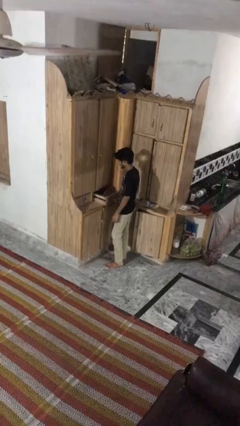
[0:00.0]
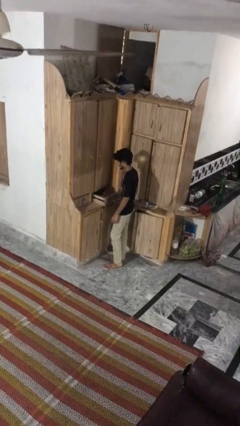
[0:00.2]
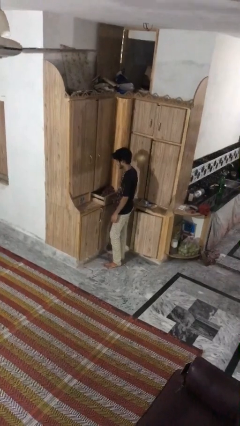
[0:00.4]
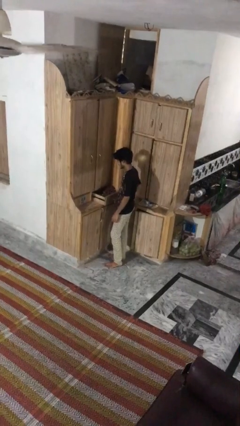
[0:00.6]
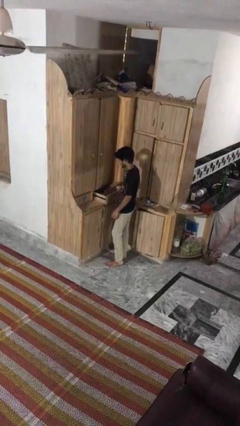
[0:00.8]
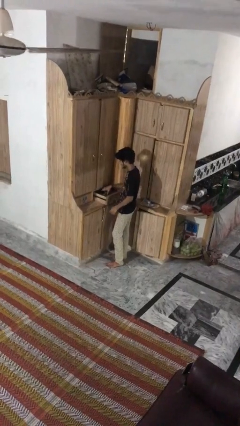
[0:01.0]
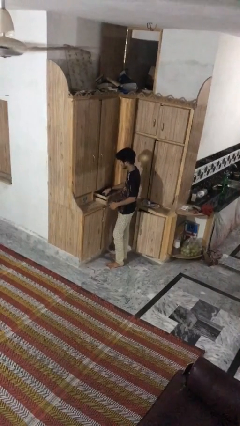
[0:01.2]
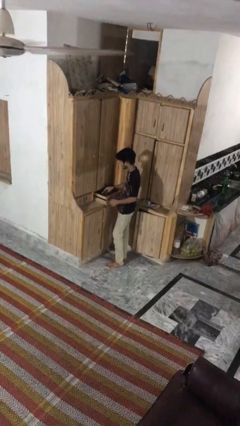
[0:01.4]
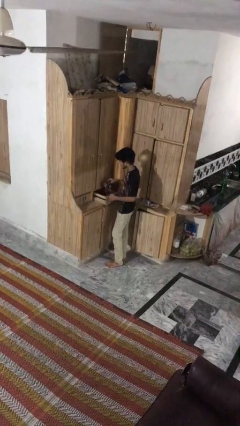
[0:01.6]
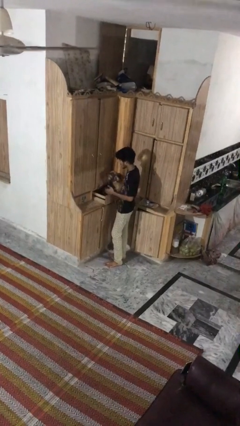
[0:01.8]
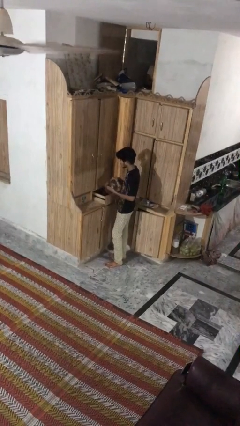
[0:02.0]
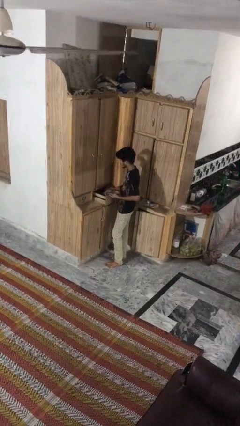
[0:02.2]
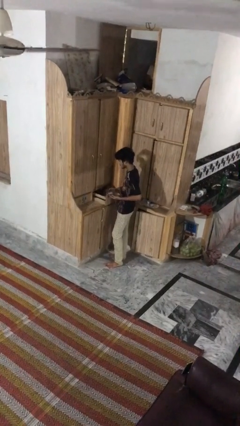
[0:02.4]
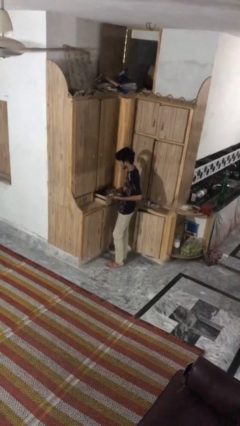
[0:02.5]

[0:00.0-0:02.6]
person takes clothes from dresser

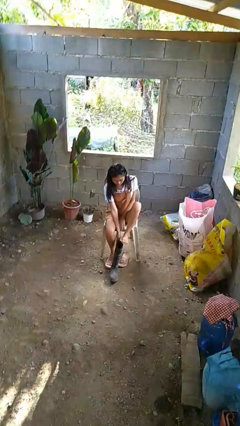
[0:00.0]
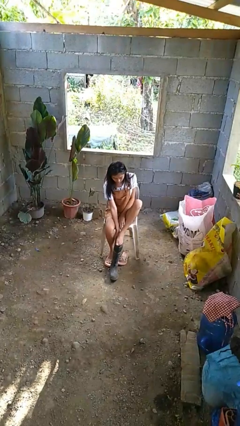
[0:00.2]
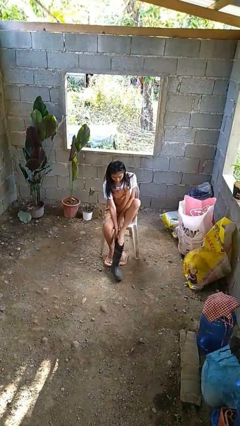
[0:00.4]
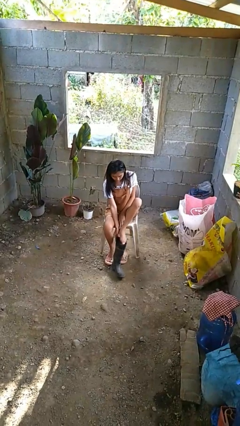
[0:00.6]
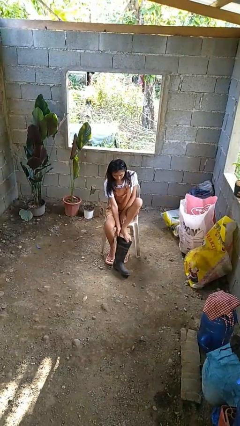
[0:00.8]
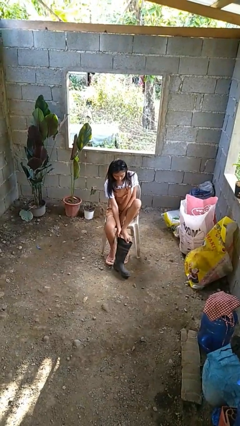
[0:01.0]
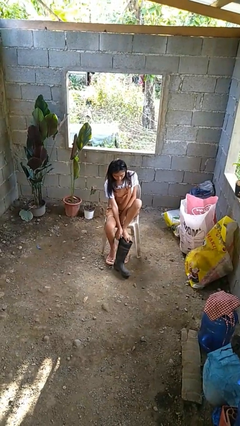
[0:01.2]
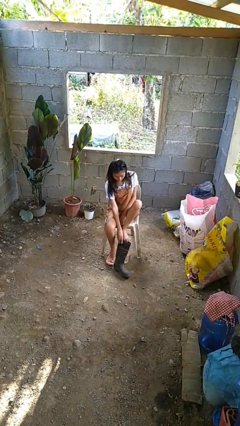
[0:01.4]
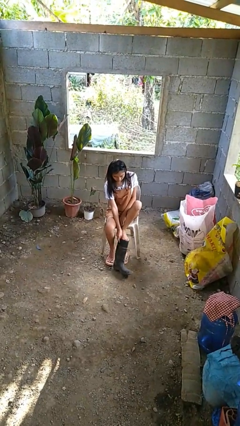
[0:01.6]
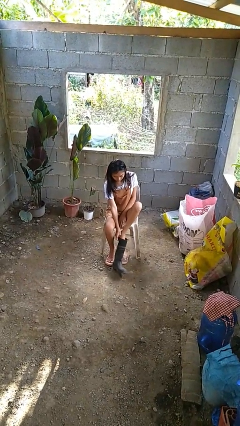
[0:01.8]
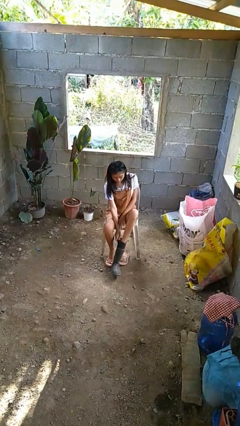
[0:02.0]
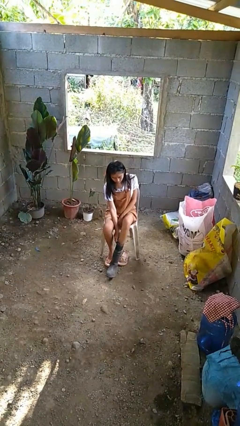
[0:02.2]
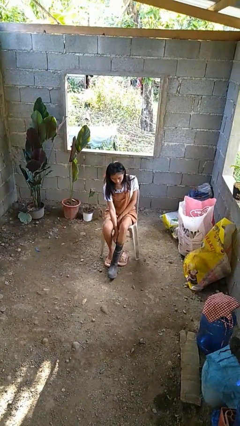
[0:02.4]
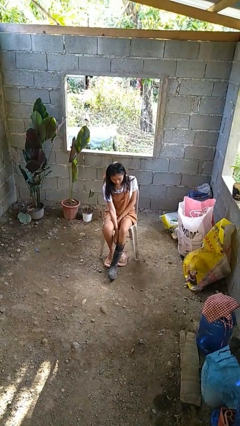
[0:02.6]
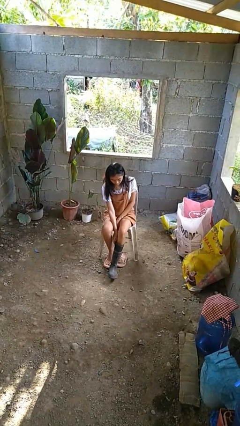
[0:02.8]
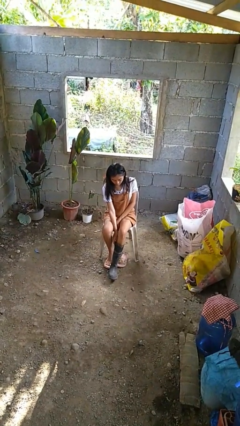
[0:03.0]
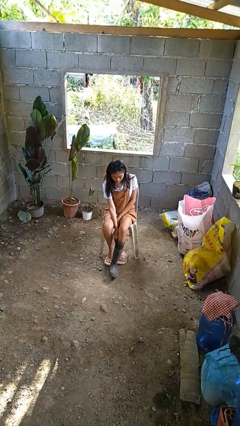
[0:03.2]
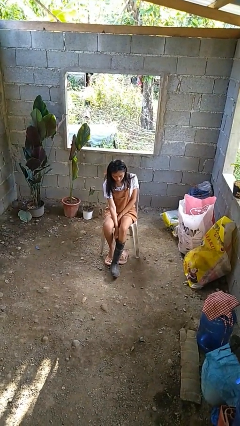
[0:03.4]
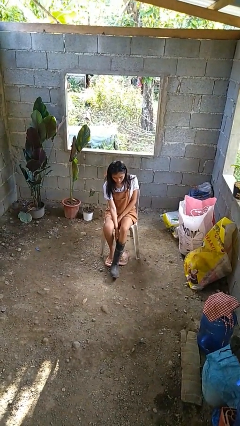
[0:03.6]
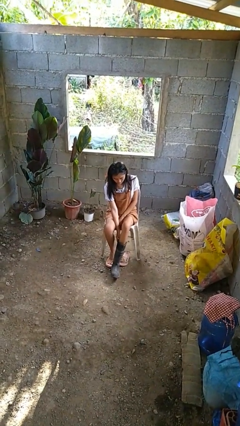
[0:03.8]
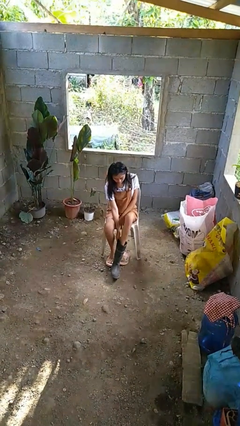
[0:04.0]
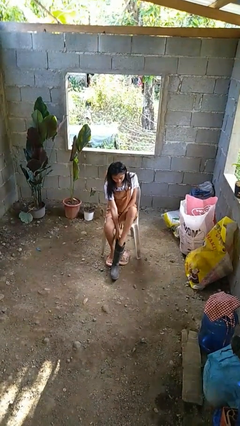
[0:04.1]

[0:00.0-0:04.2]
person puts on boots

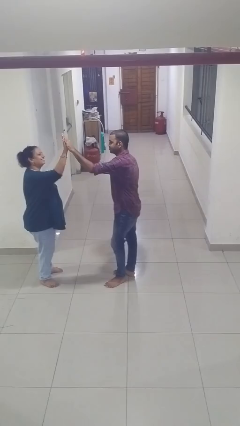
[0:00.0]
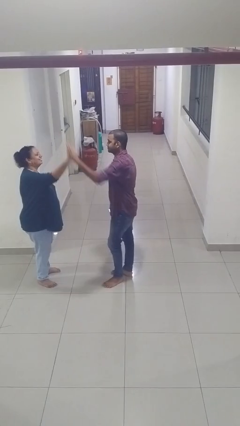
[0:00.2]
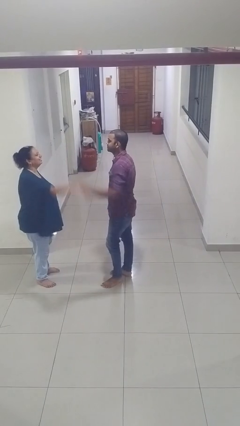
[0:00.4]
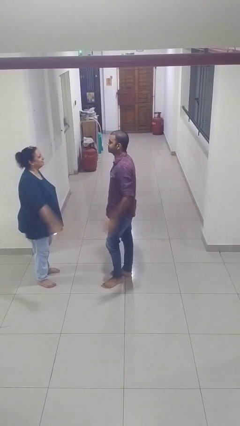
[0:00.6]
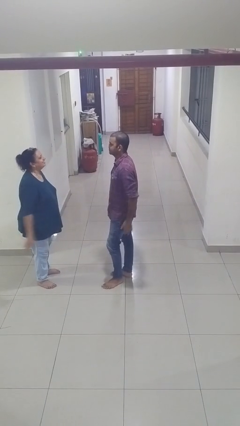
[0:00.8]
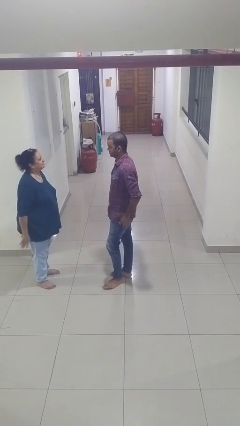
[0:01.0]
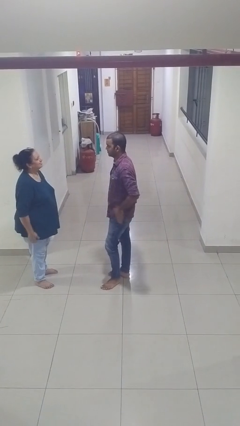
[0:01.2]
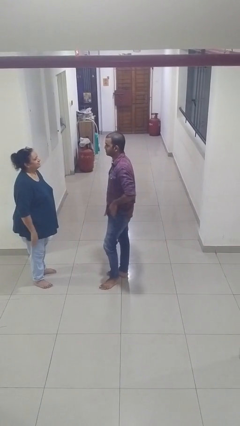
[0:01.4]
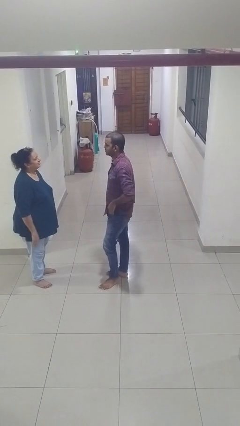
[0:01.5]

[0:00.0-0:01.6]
person highfives hand

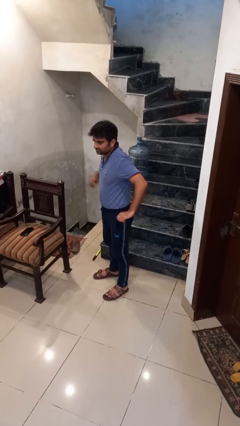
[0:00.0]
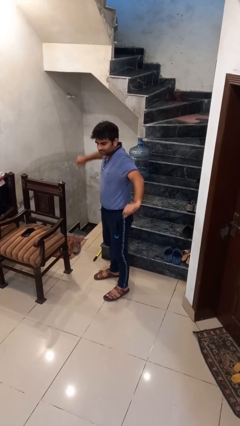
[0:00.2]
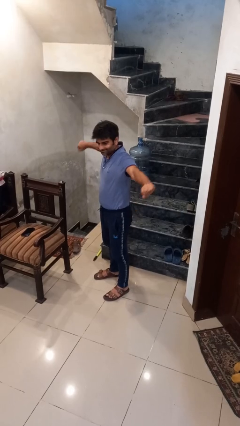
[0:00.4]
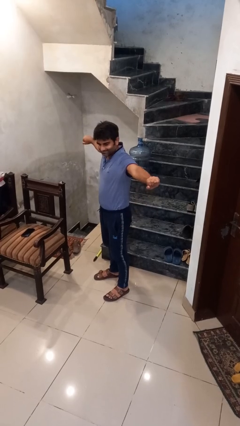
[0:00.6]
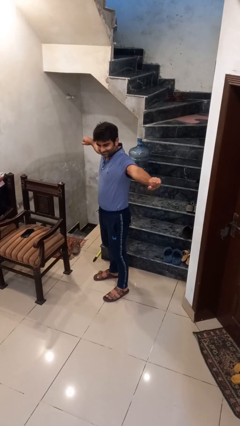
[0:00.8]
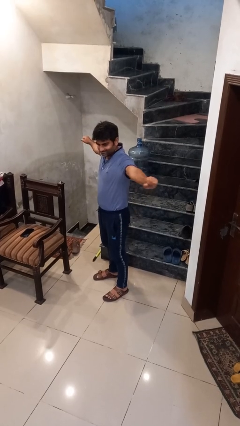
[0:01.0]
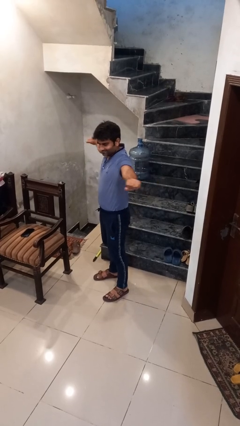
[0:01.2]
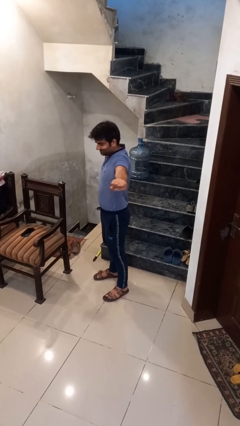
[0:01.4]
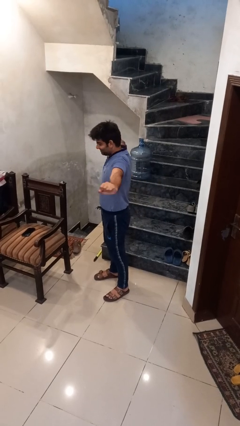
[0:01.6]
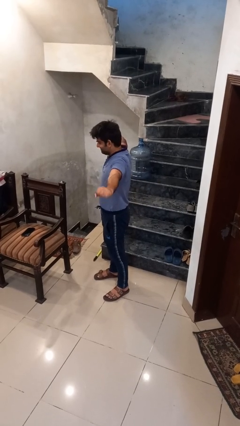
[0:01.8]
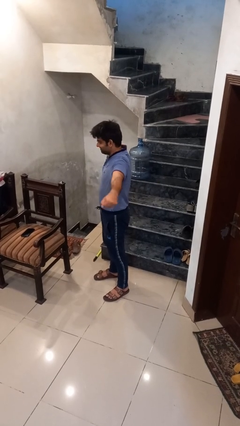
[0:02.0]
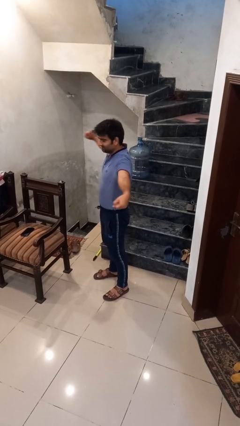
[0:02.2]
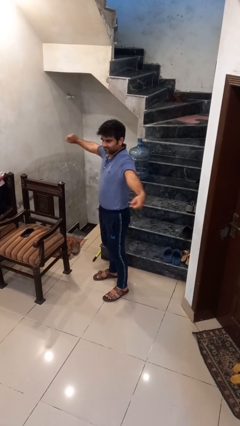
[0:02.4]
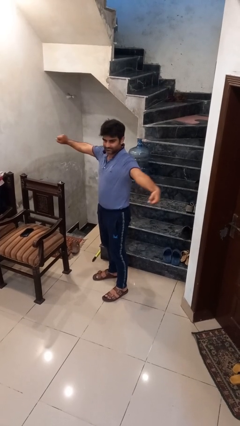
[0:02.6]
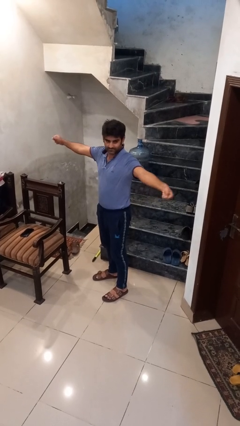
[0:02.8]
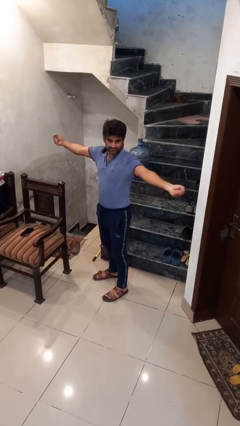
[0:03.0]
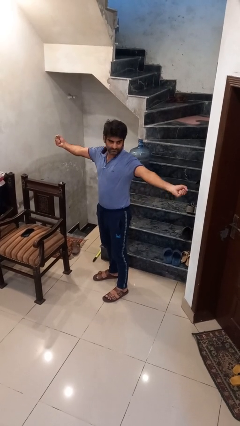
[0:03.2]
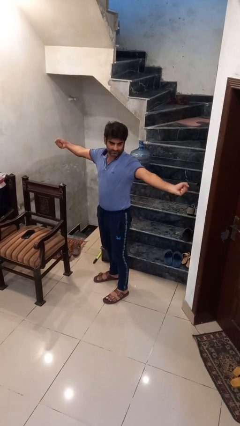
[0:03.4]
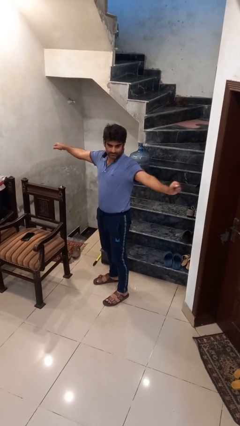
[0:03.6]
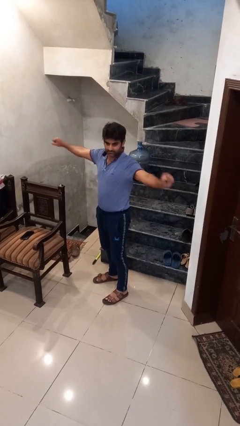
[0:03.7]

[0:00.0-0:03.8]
person stretches arms to side

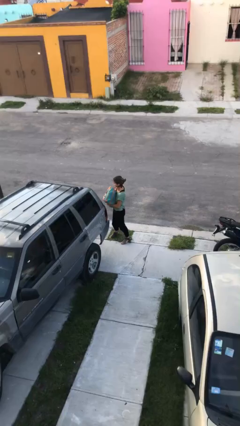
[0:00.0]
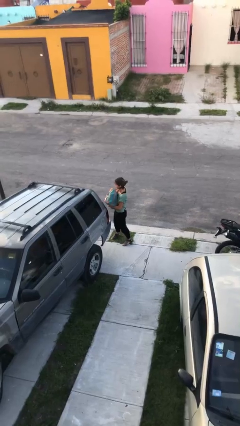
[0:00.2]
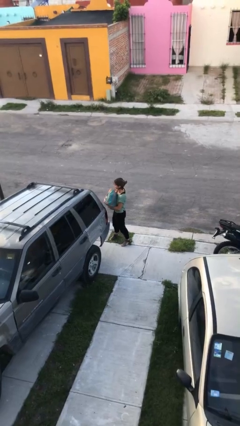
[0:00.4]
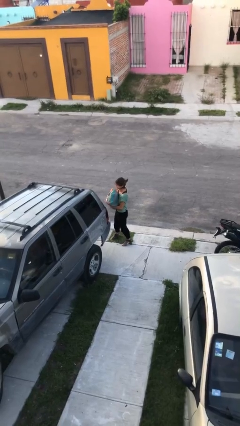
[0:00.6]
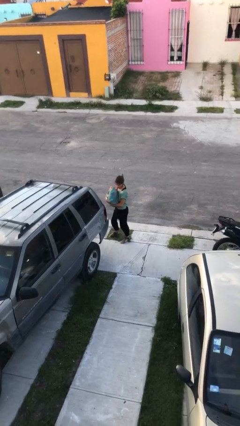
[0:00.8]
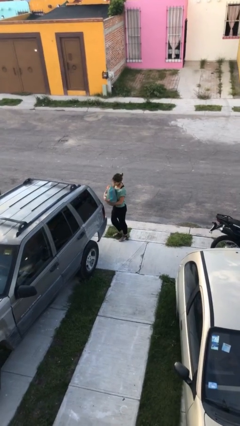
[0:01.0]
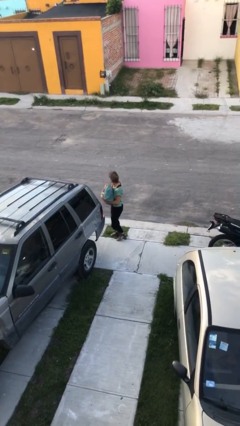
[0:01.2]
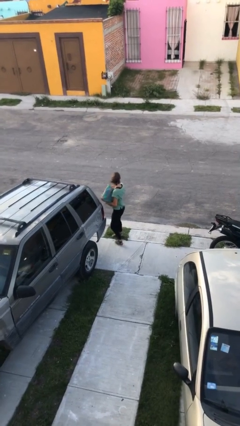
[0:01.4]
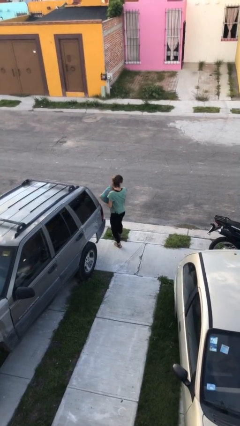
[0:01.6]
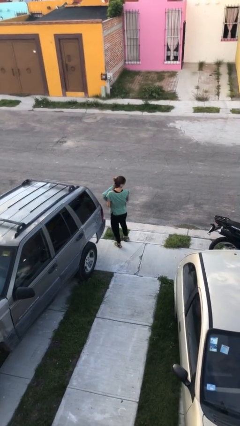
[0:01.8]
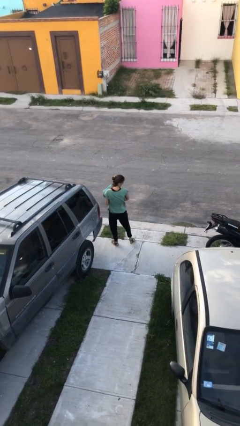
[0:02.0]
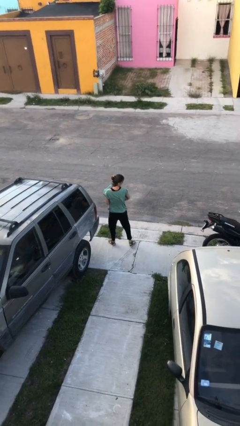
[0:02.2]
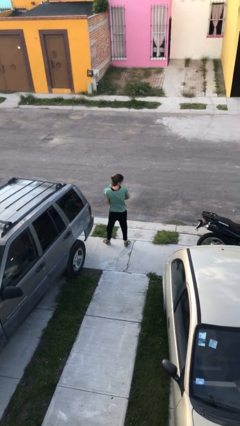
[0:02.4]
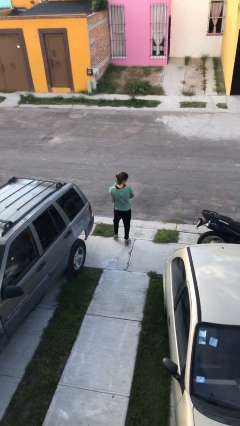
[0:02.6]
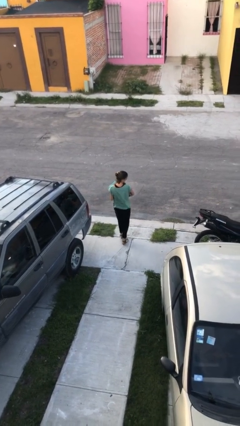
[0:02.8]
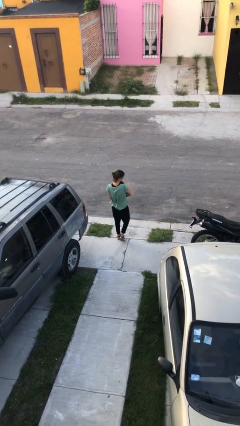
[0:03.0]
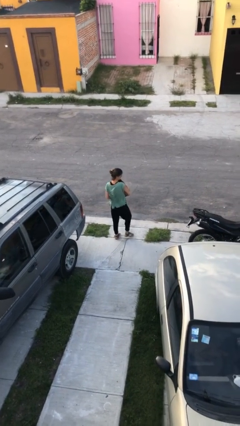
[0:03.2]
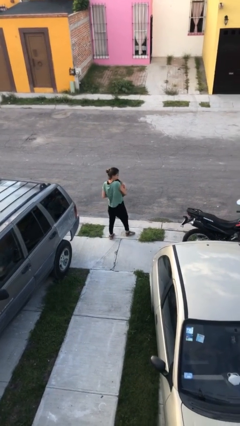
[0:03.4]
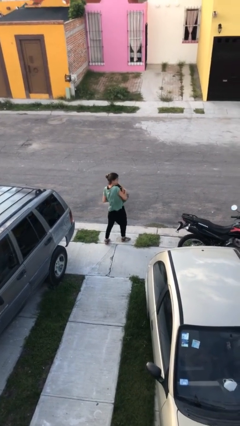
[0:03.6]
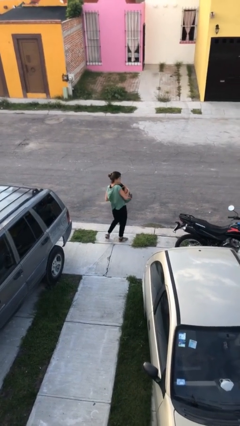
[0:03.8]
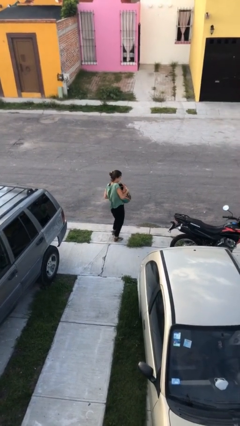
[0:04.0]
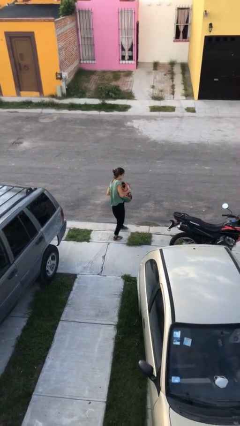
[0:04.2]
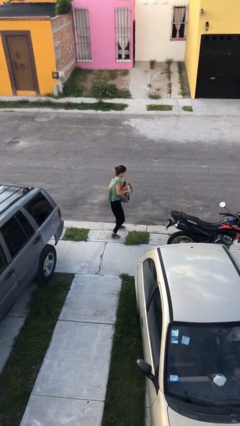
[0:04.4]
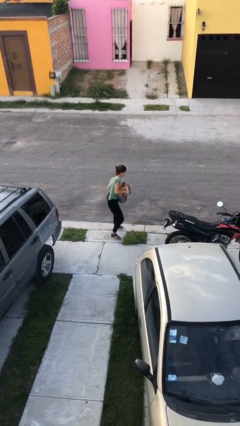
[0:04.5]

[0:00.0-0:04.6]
person carries heavy object

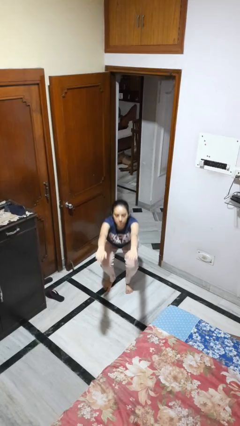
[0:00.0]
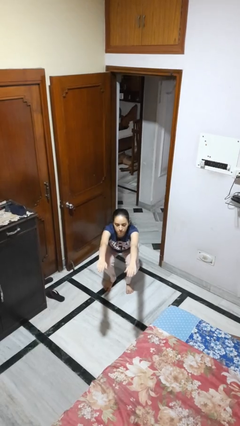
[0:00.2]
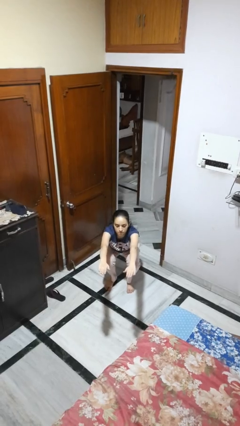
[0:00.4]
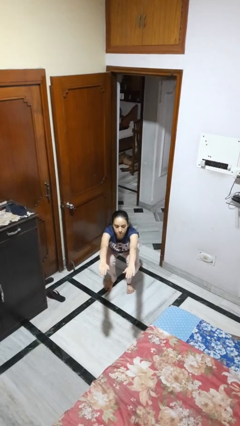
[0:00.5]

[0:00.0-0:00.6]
person squats

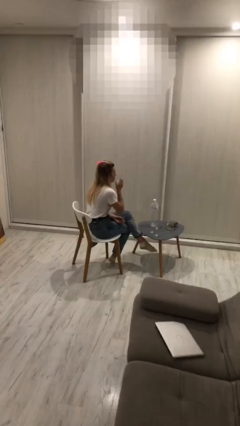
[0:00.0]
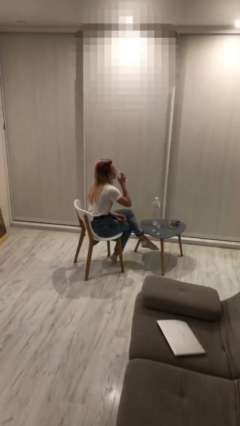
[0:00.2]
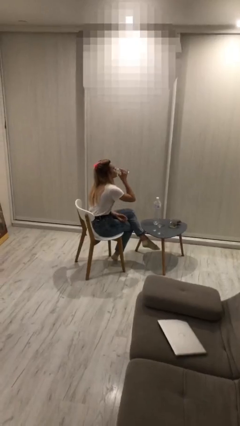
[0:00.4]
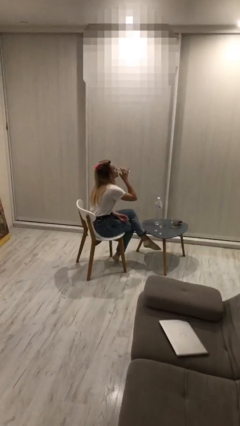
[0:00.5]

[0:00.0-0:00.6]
person drinks from shotglass
